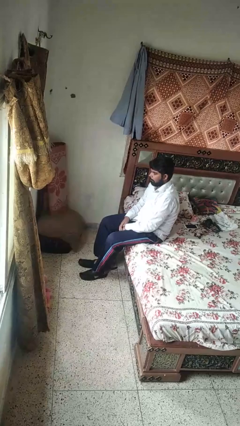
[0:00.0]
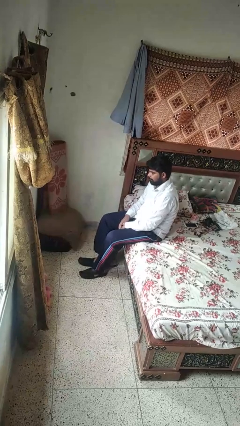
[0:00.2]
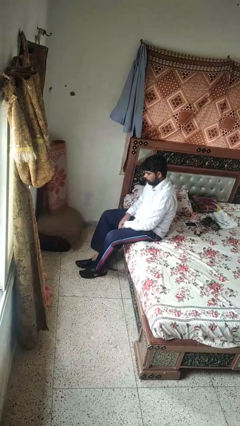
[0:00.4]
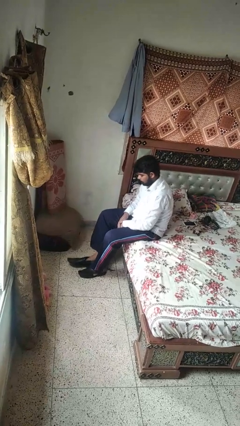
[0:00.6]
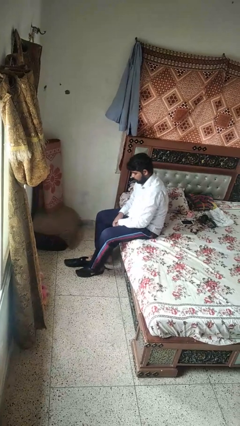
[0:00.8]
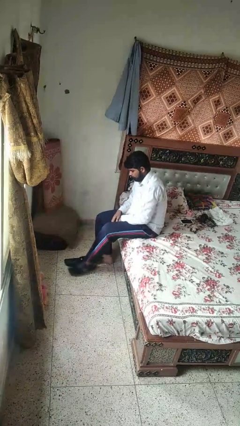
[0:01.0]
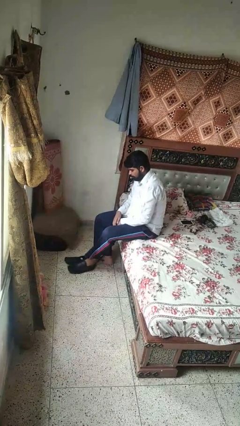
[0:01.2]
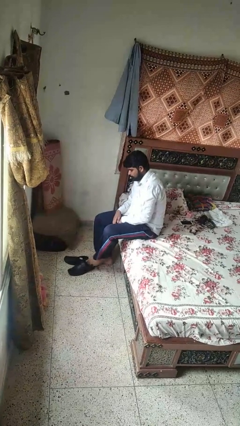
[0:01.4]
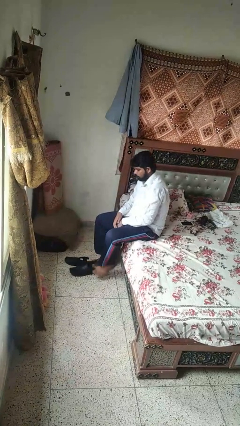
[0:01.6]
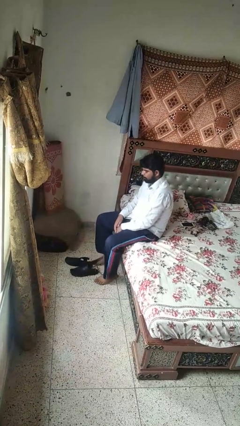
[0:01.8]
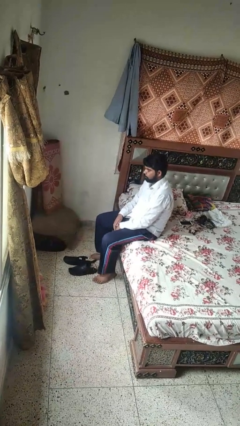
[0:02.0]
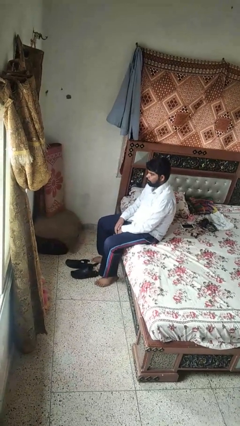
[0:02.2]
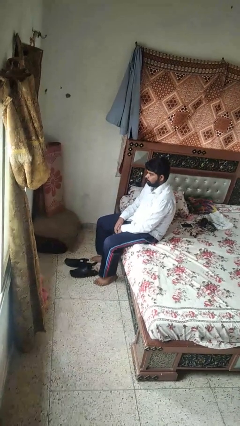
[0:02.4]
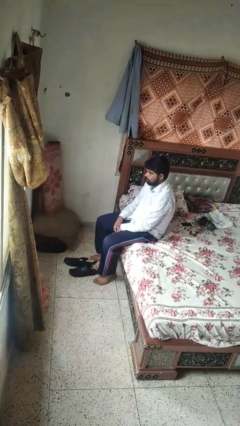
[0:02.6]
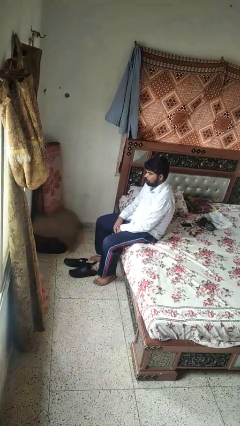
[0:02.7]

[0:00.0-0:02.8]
person takes off shoes

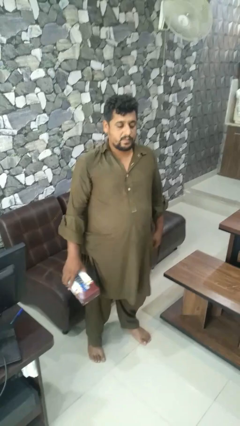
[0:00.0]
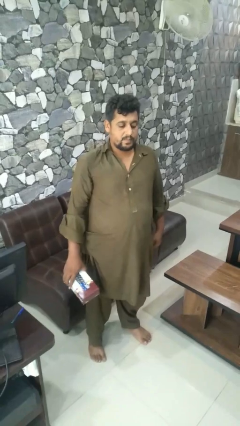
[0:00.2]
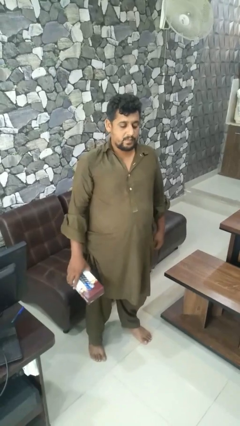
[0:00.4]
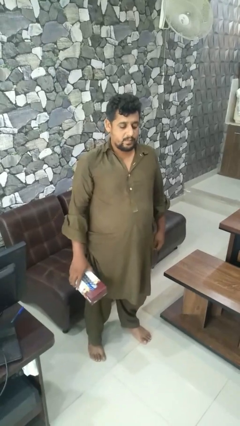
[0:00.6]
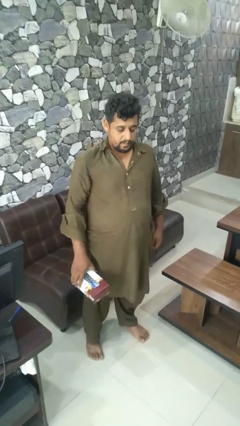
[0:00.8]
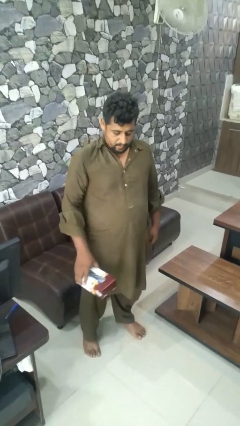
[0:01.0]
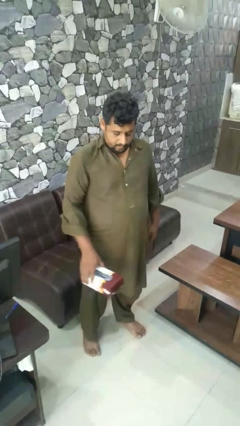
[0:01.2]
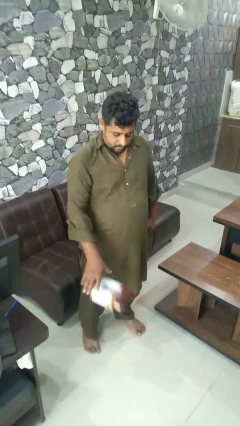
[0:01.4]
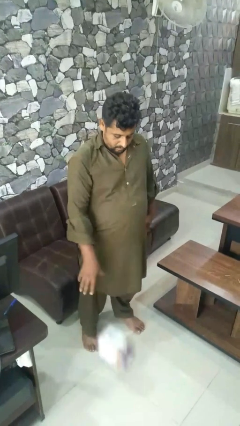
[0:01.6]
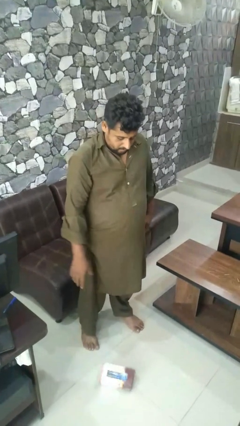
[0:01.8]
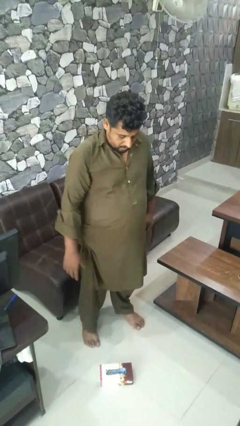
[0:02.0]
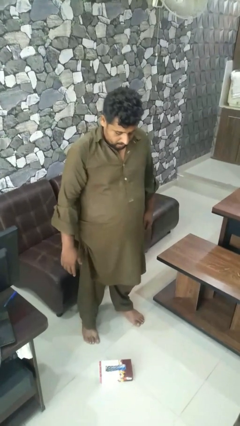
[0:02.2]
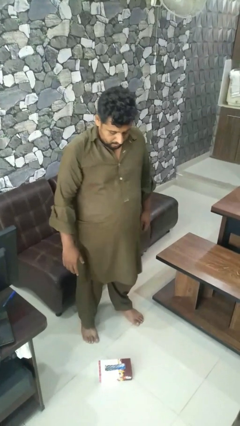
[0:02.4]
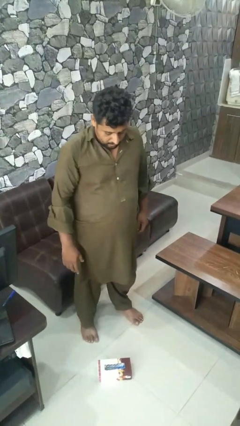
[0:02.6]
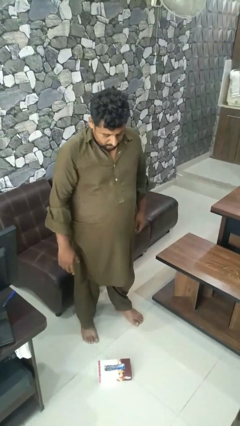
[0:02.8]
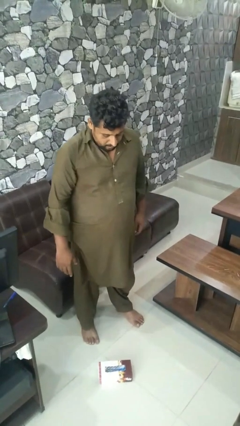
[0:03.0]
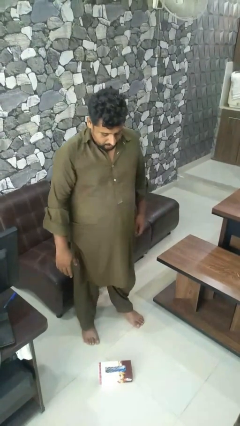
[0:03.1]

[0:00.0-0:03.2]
person throws object to ground

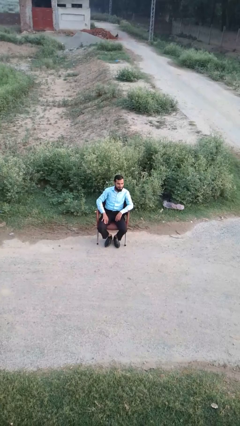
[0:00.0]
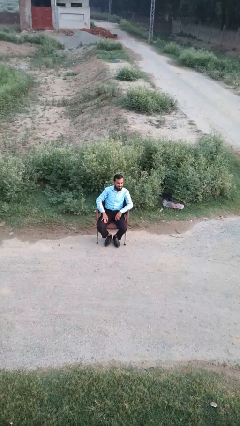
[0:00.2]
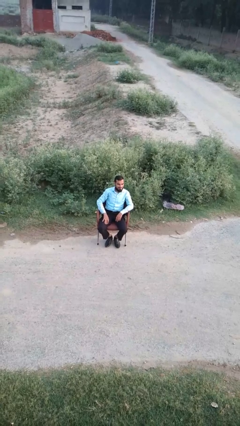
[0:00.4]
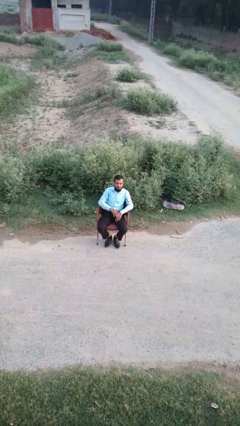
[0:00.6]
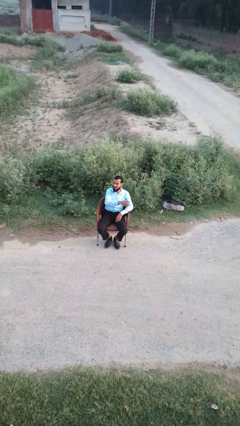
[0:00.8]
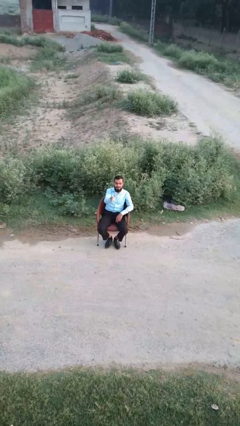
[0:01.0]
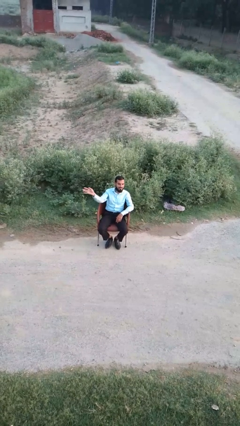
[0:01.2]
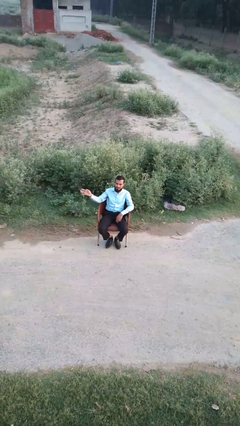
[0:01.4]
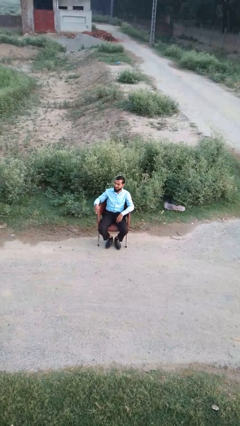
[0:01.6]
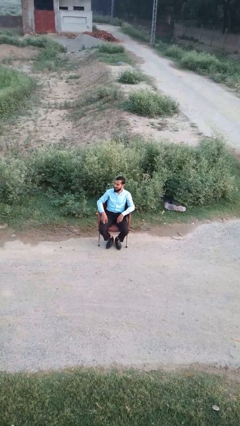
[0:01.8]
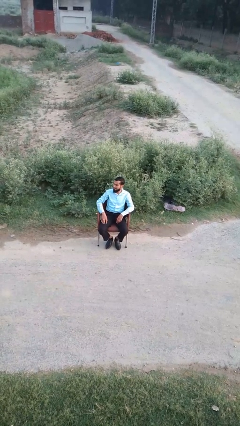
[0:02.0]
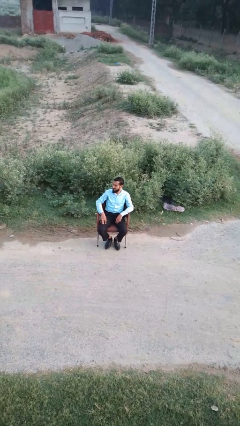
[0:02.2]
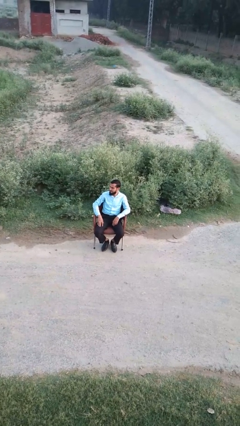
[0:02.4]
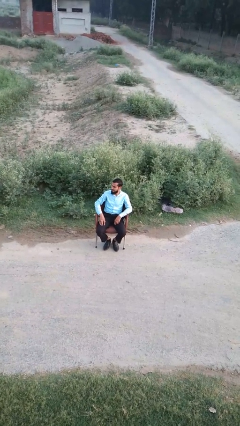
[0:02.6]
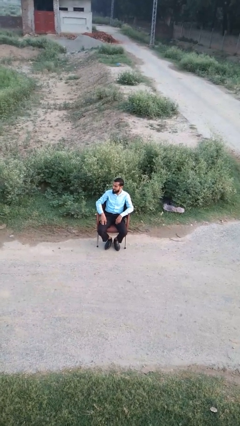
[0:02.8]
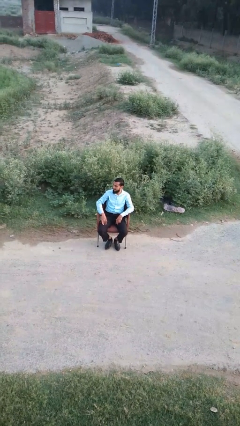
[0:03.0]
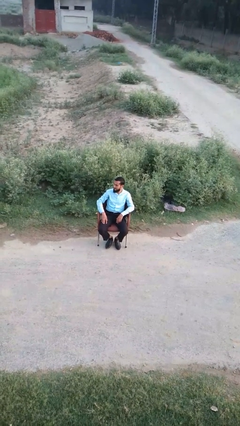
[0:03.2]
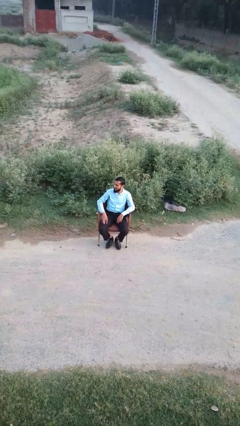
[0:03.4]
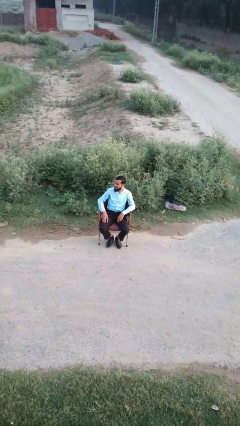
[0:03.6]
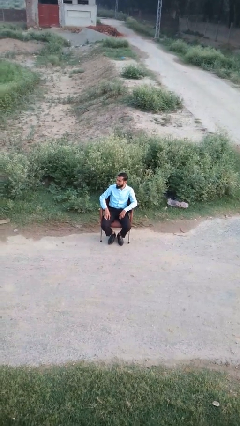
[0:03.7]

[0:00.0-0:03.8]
person gestures swipe right

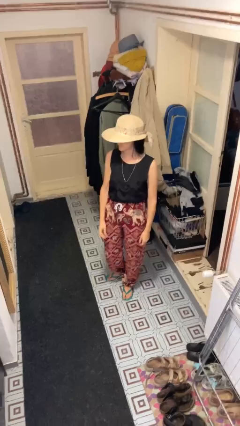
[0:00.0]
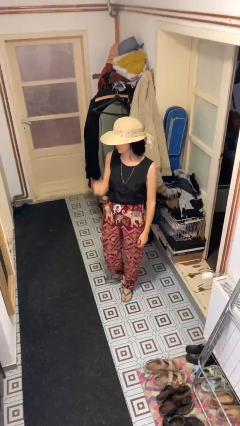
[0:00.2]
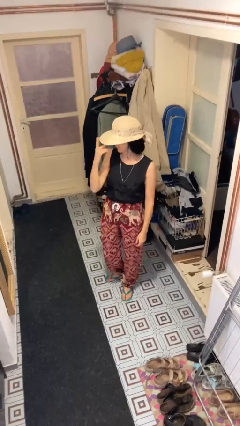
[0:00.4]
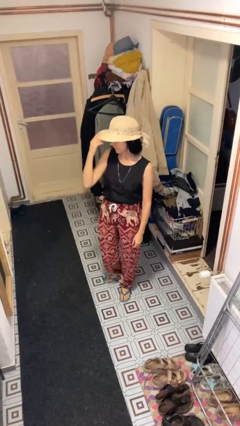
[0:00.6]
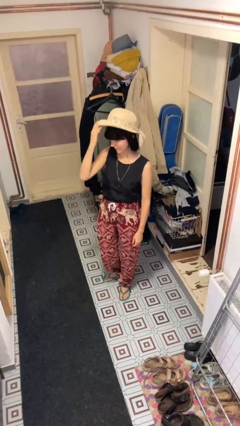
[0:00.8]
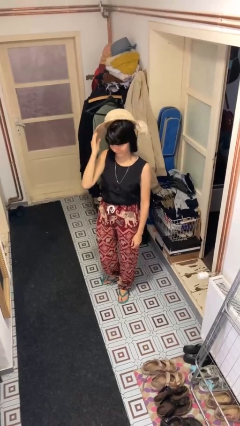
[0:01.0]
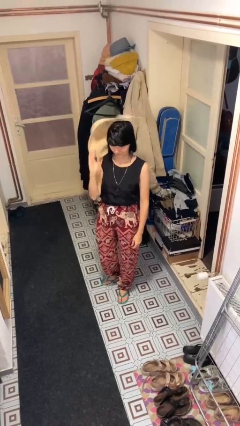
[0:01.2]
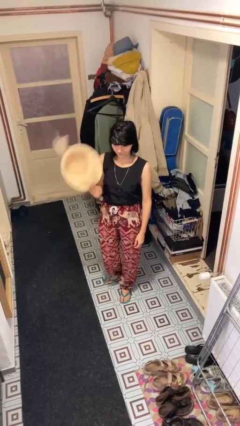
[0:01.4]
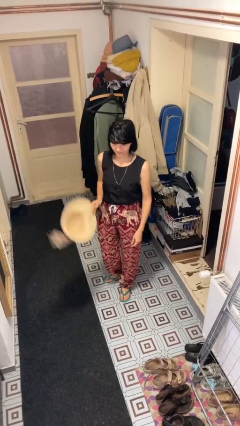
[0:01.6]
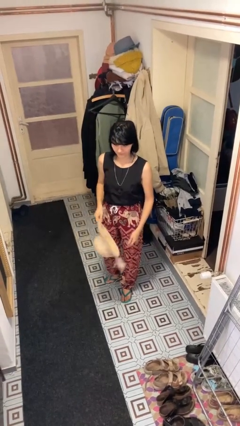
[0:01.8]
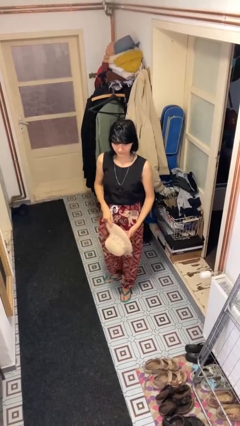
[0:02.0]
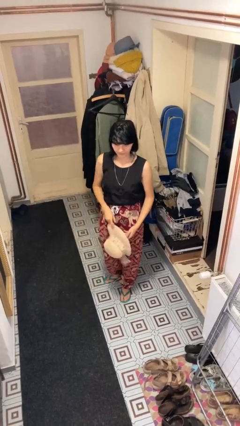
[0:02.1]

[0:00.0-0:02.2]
person takes off hat

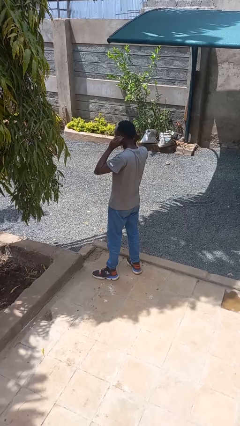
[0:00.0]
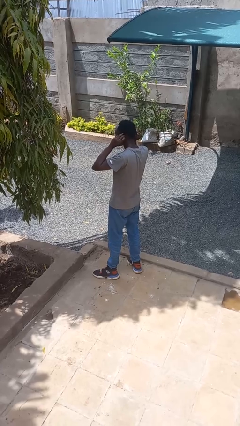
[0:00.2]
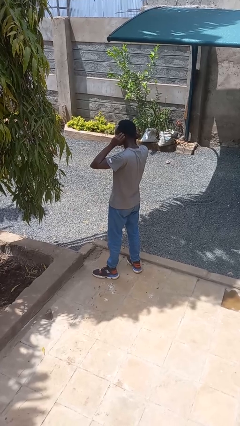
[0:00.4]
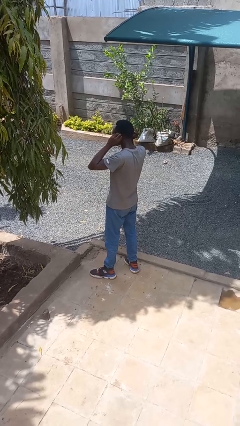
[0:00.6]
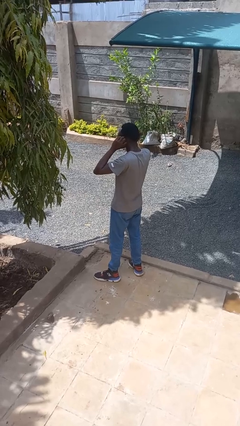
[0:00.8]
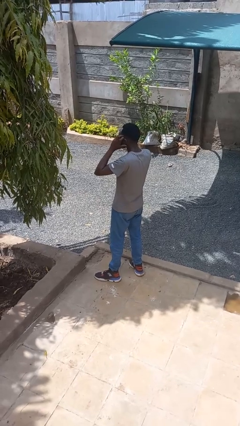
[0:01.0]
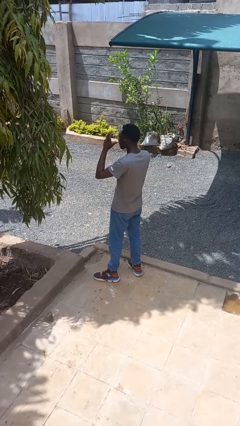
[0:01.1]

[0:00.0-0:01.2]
person puts on facemask

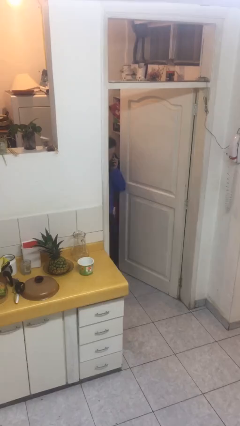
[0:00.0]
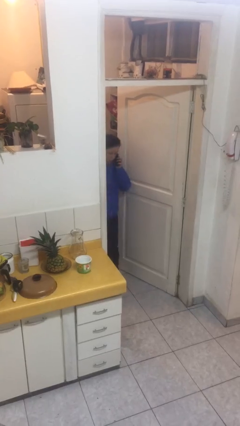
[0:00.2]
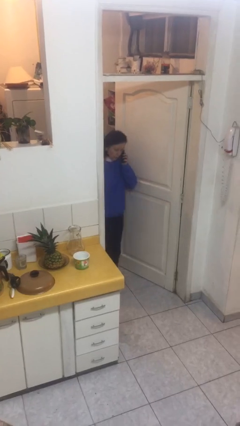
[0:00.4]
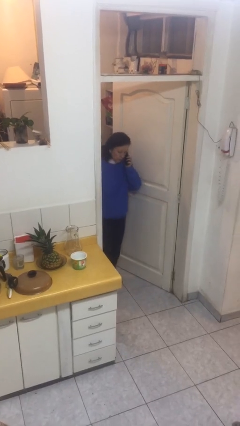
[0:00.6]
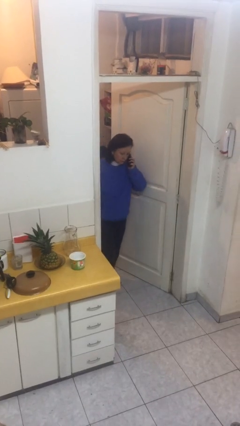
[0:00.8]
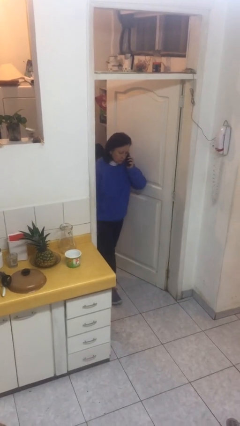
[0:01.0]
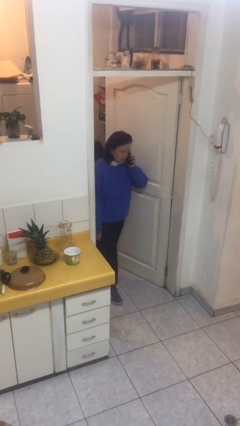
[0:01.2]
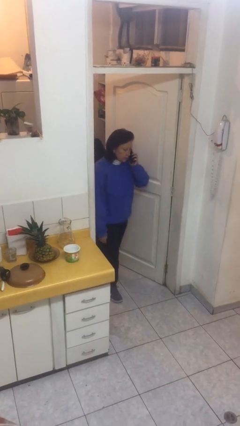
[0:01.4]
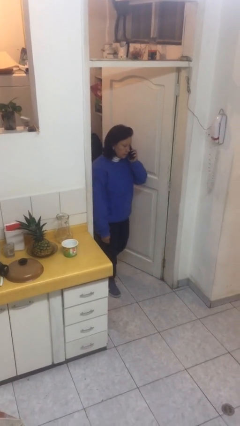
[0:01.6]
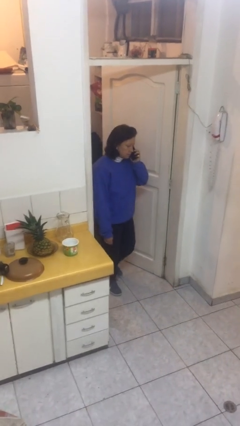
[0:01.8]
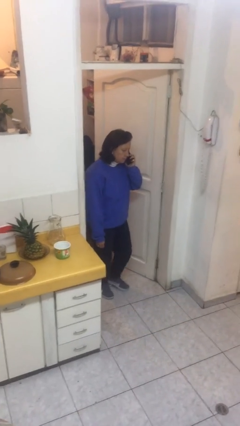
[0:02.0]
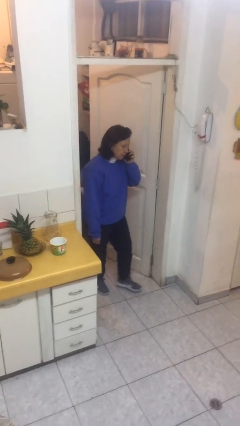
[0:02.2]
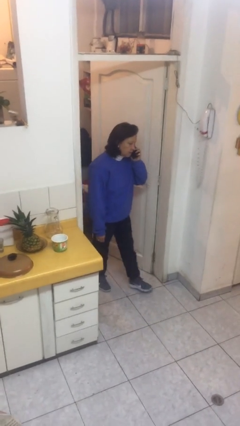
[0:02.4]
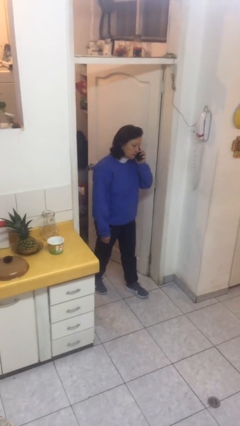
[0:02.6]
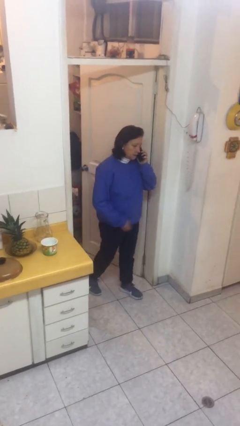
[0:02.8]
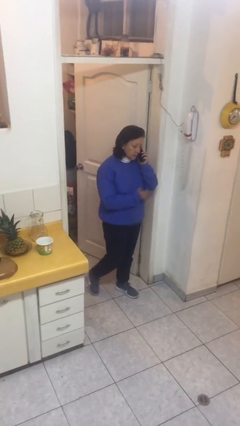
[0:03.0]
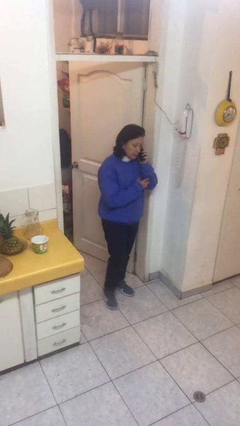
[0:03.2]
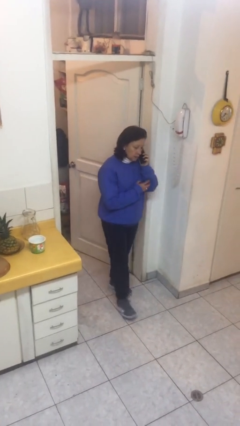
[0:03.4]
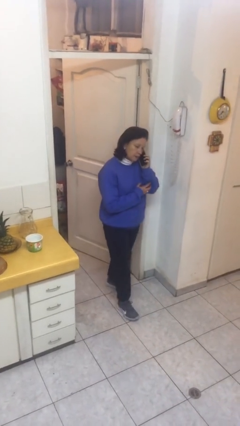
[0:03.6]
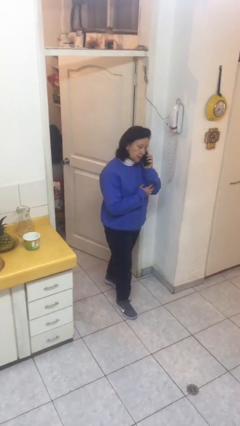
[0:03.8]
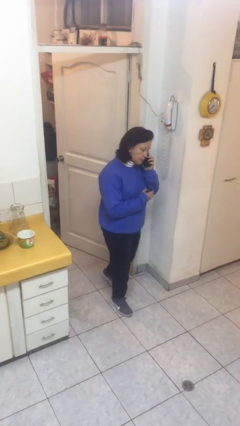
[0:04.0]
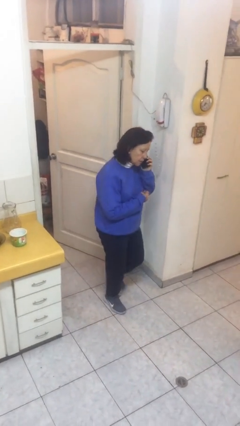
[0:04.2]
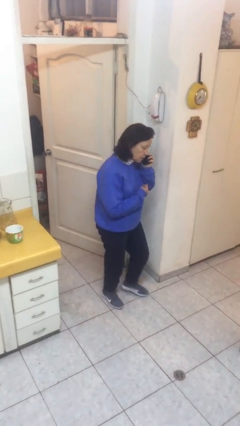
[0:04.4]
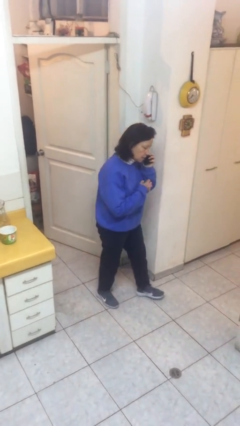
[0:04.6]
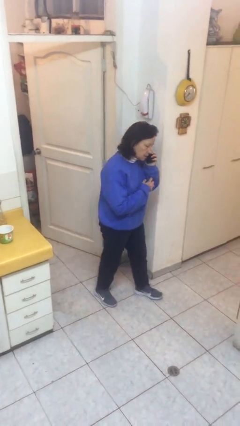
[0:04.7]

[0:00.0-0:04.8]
person enters scene through structure
